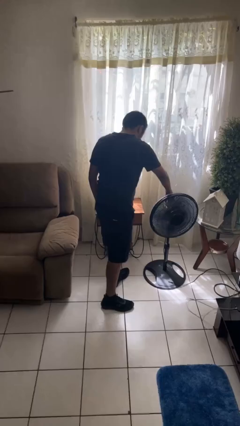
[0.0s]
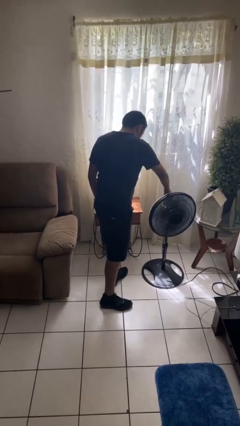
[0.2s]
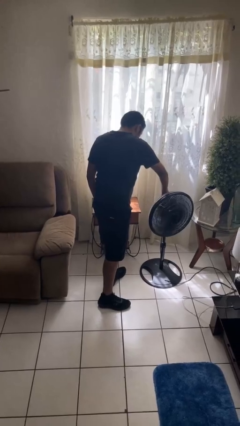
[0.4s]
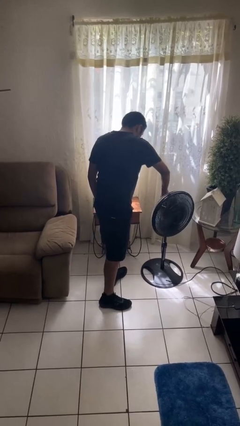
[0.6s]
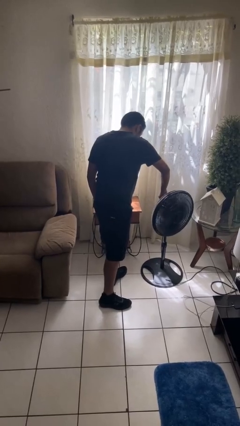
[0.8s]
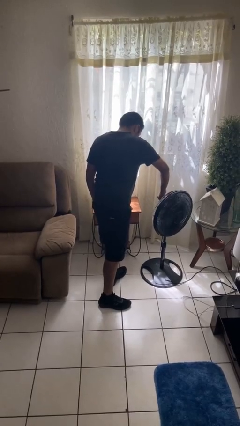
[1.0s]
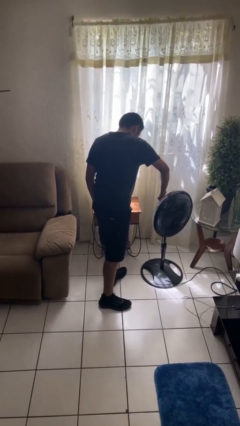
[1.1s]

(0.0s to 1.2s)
person turns off fan

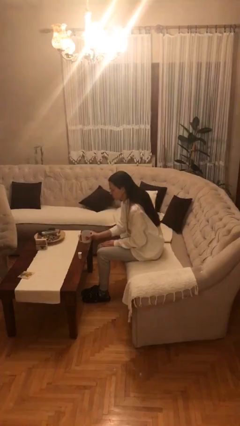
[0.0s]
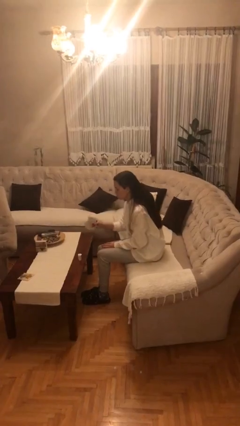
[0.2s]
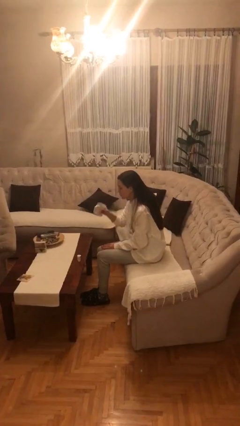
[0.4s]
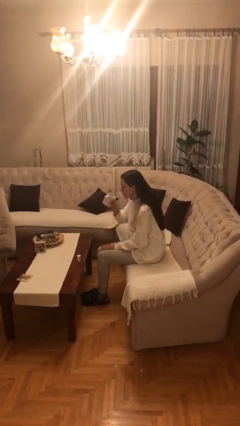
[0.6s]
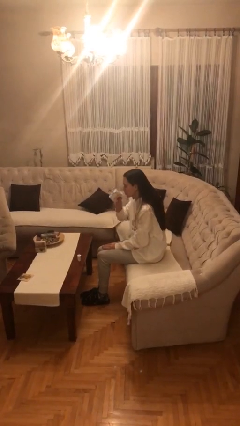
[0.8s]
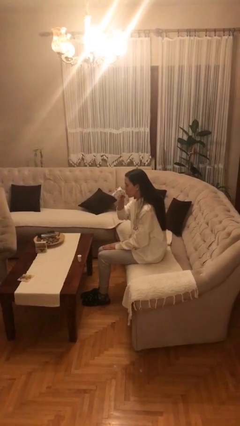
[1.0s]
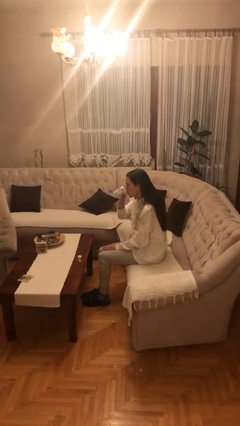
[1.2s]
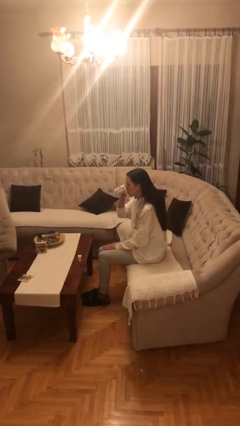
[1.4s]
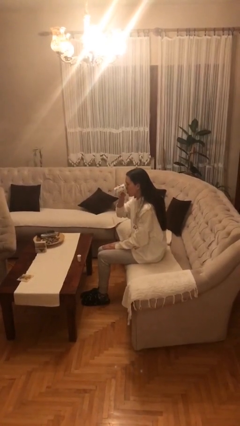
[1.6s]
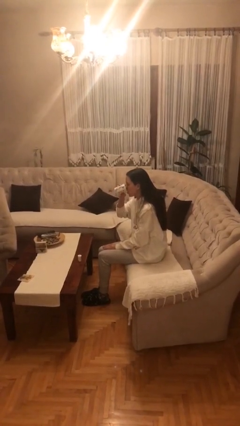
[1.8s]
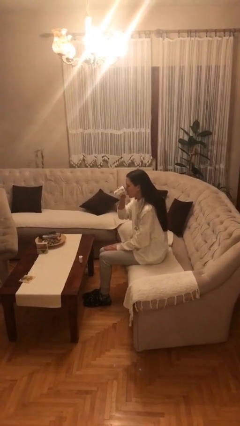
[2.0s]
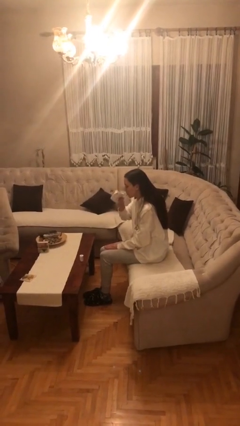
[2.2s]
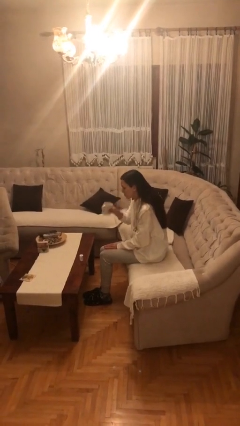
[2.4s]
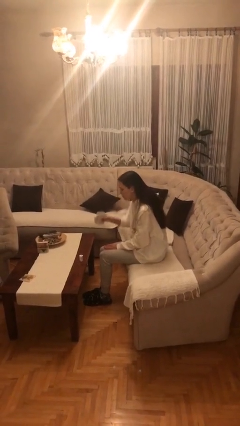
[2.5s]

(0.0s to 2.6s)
person drinks from cup

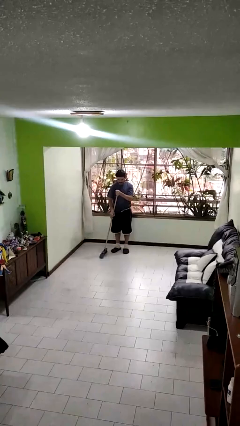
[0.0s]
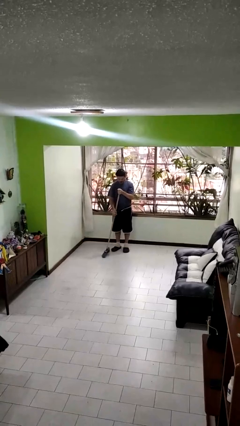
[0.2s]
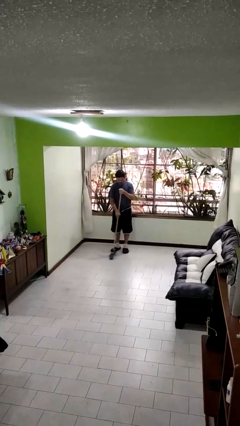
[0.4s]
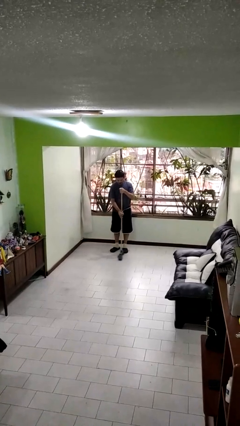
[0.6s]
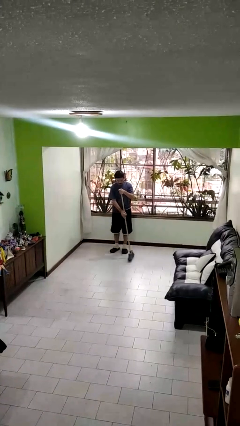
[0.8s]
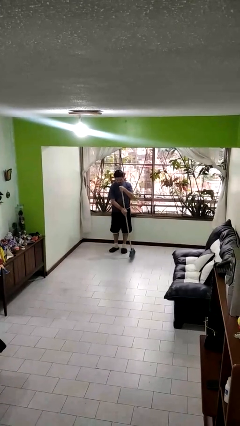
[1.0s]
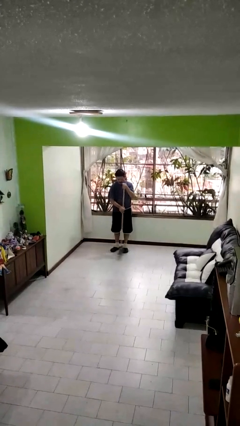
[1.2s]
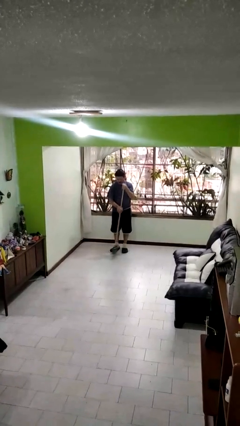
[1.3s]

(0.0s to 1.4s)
person sweeps floor

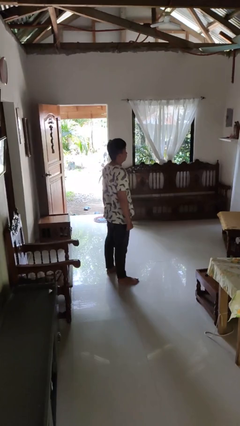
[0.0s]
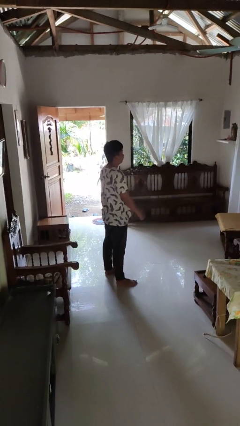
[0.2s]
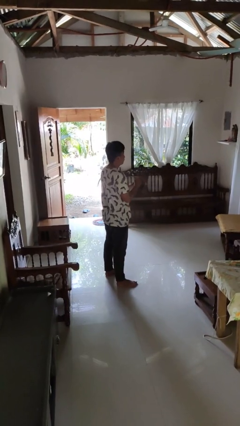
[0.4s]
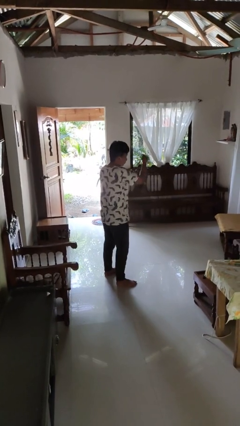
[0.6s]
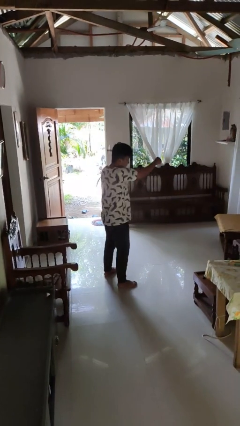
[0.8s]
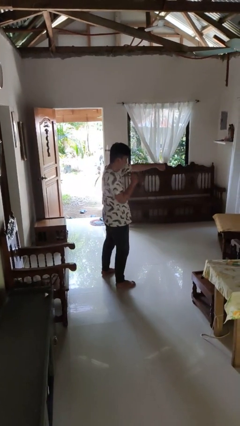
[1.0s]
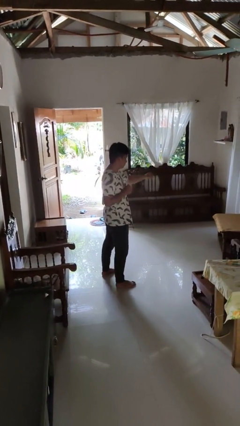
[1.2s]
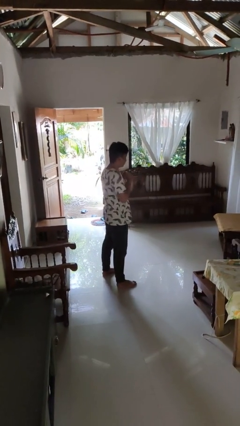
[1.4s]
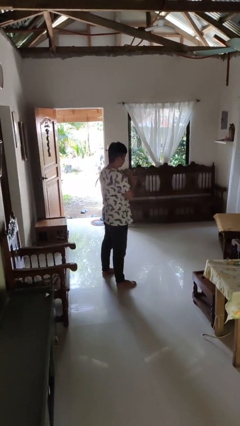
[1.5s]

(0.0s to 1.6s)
person punches

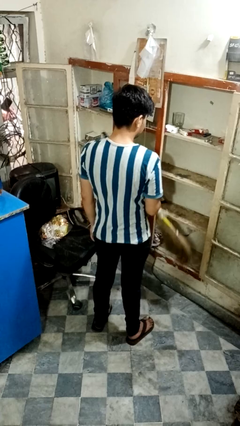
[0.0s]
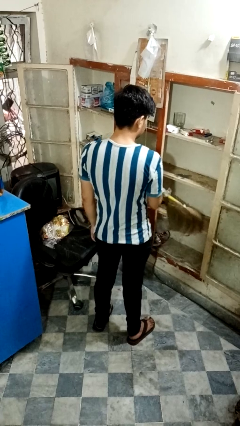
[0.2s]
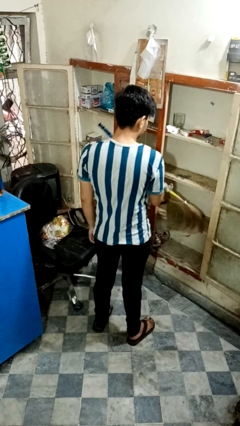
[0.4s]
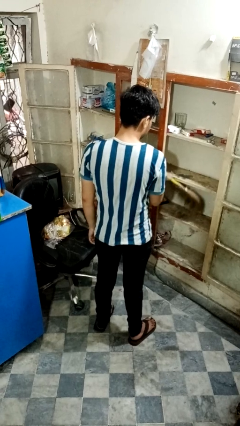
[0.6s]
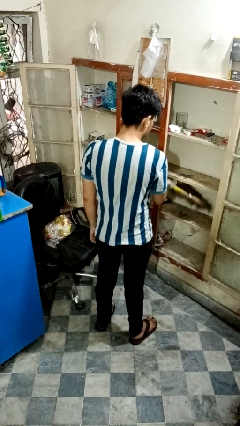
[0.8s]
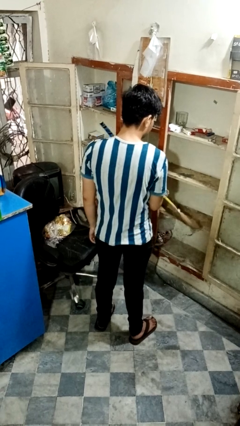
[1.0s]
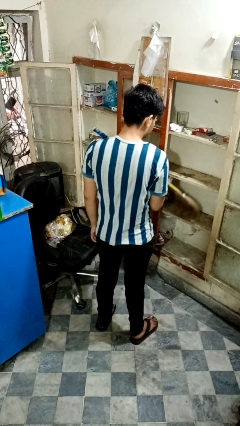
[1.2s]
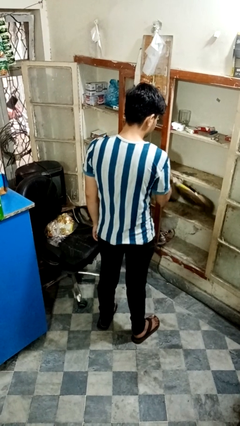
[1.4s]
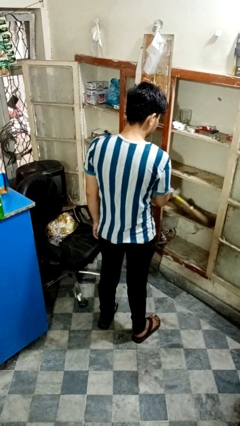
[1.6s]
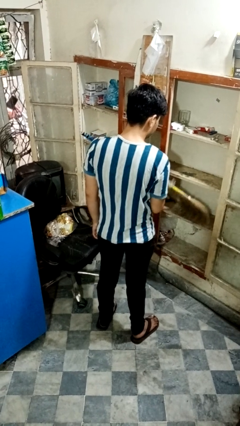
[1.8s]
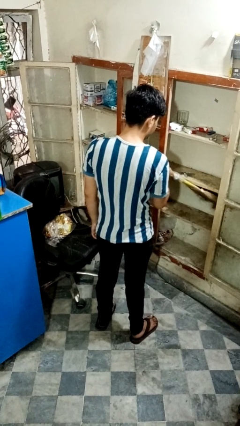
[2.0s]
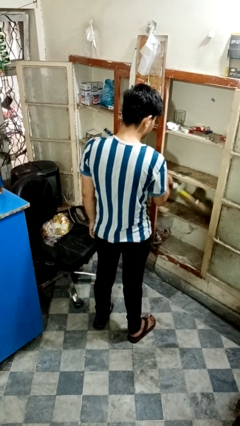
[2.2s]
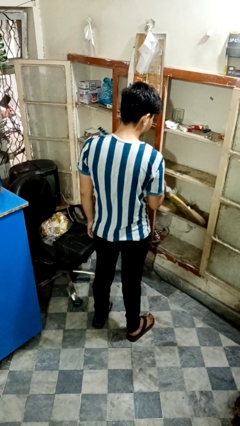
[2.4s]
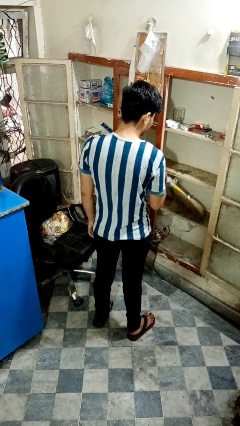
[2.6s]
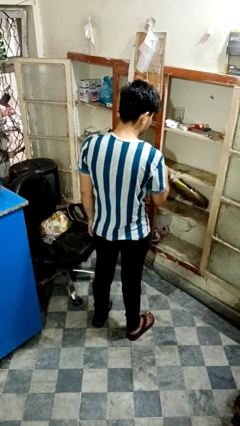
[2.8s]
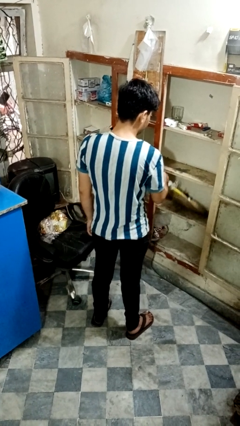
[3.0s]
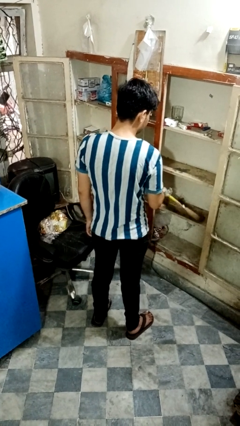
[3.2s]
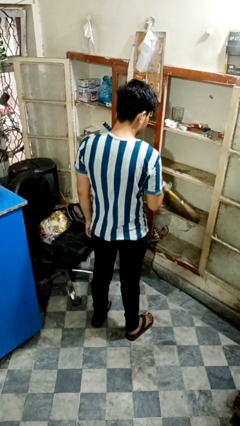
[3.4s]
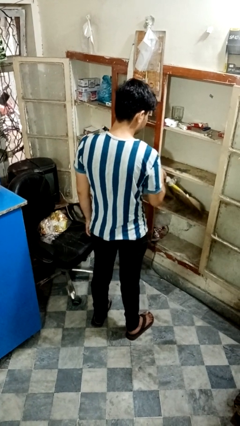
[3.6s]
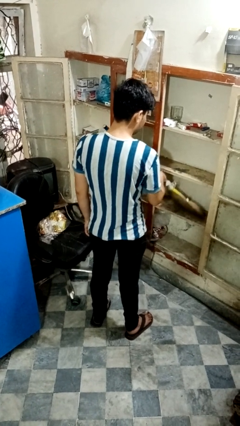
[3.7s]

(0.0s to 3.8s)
person dusts furniture

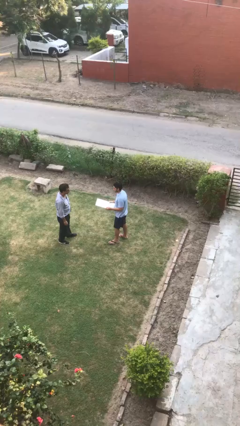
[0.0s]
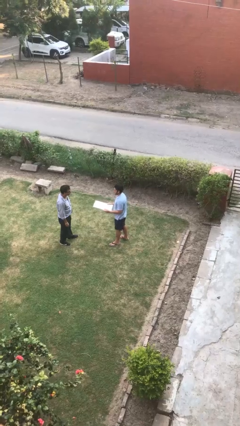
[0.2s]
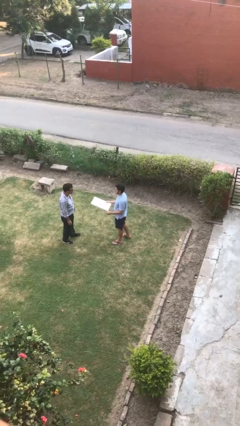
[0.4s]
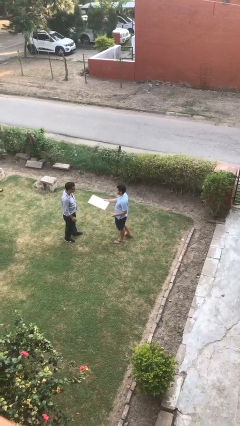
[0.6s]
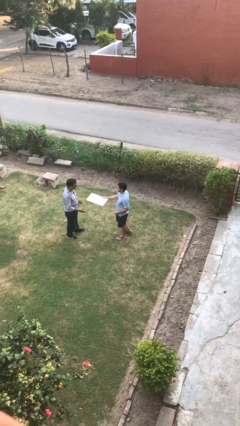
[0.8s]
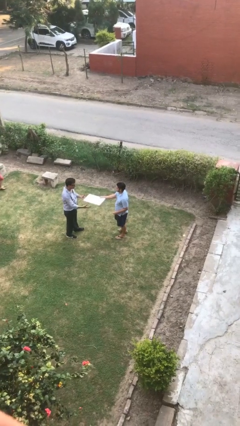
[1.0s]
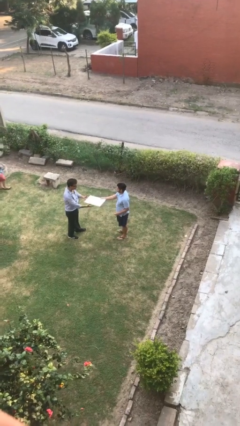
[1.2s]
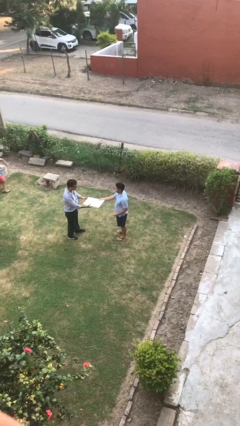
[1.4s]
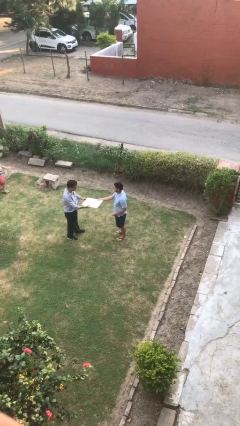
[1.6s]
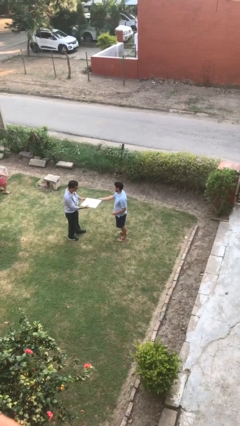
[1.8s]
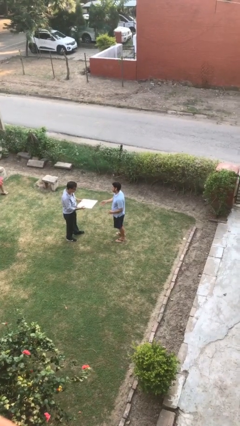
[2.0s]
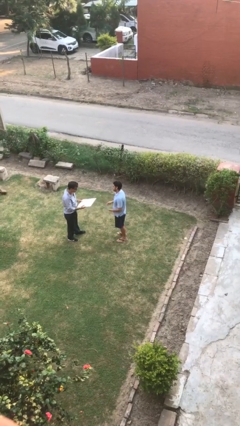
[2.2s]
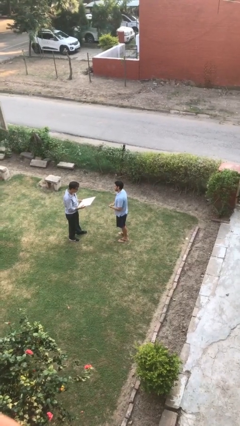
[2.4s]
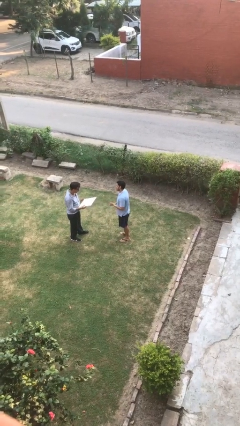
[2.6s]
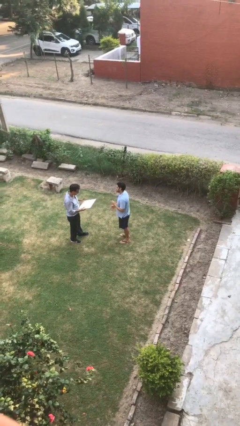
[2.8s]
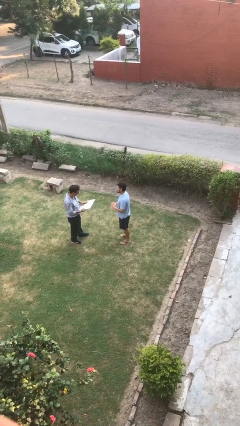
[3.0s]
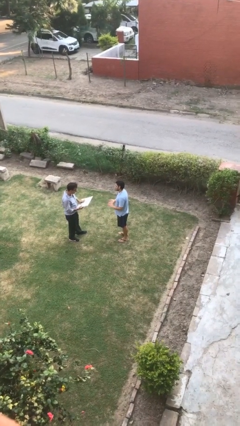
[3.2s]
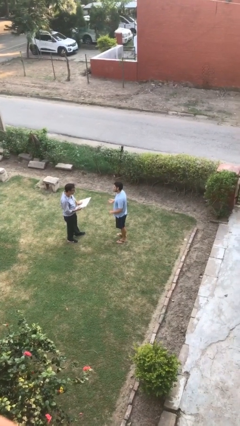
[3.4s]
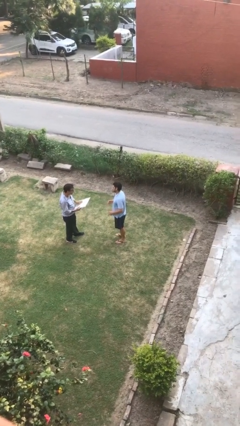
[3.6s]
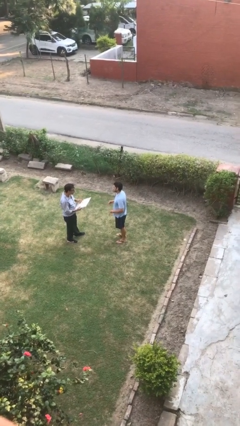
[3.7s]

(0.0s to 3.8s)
person transfers object to person

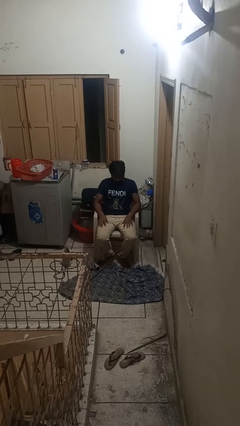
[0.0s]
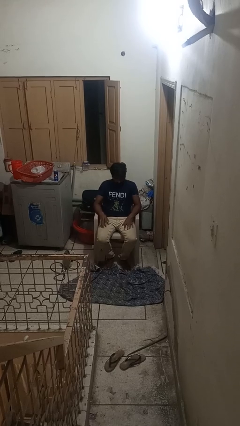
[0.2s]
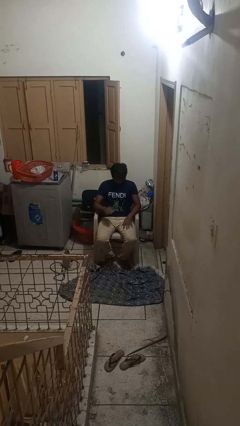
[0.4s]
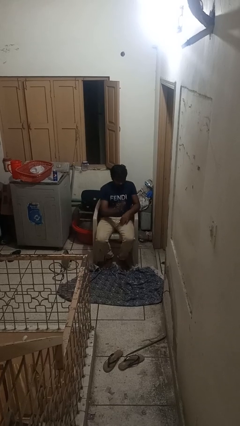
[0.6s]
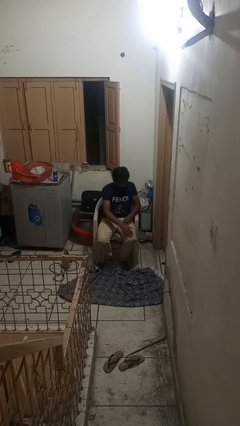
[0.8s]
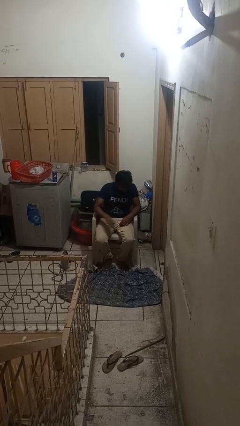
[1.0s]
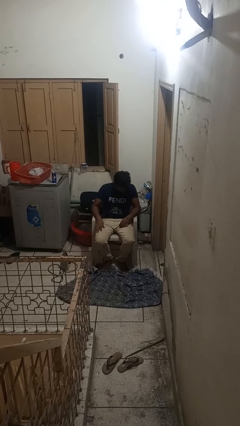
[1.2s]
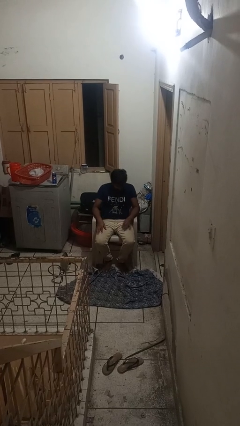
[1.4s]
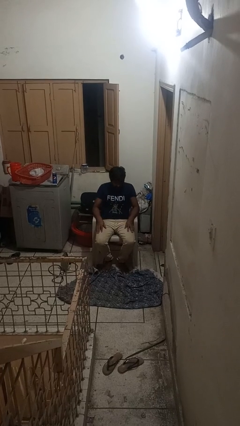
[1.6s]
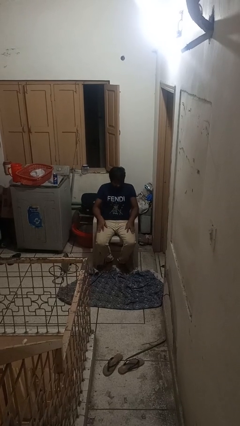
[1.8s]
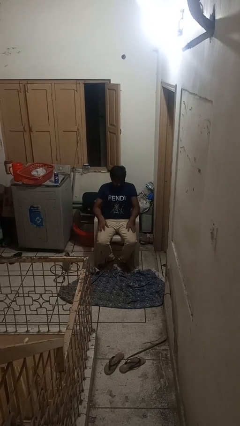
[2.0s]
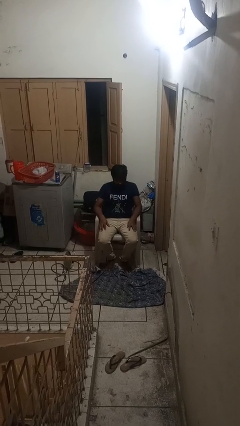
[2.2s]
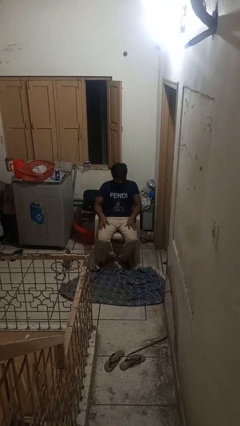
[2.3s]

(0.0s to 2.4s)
person swats bug
